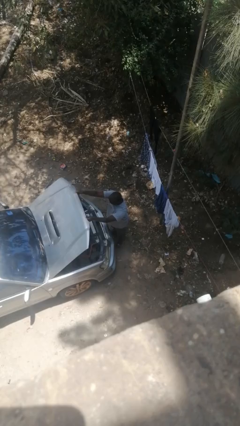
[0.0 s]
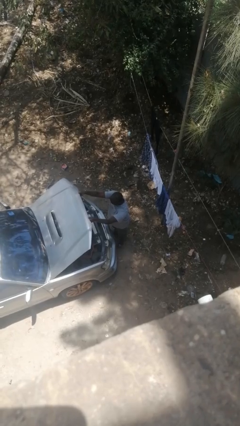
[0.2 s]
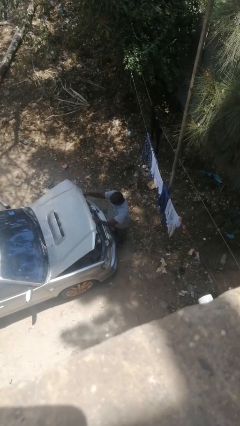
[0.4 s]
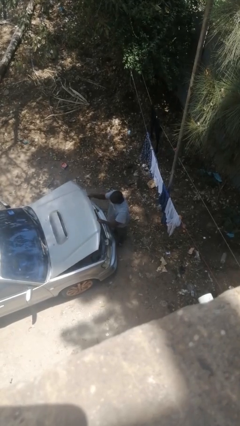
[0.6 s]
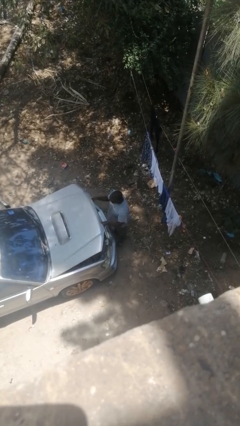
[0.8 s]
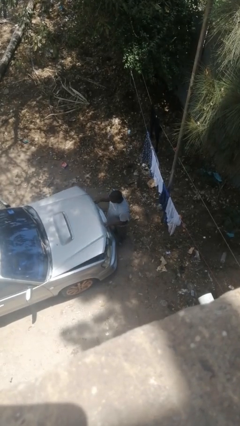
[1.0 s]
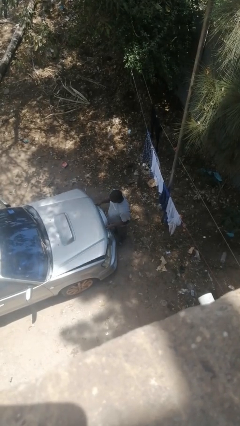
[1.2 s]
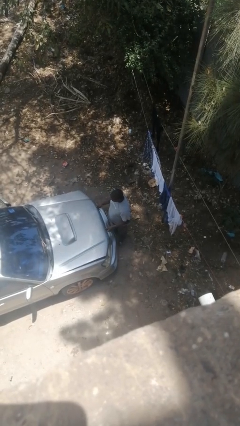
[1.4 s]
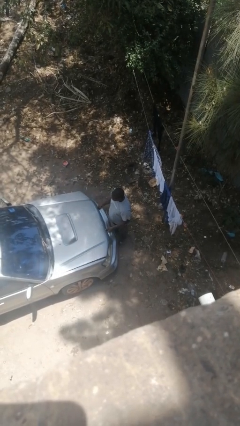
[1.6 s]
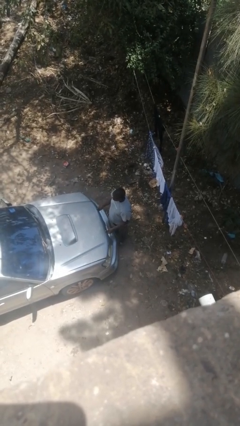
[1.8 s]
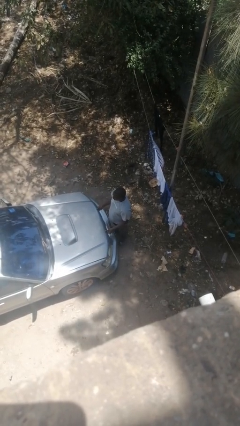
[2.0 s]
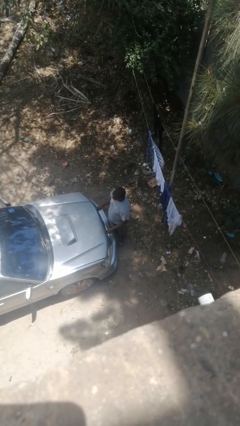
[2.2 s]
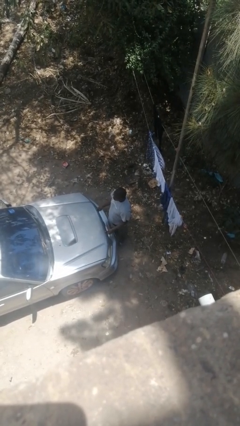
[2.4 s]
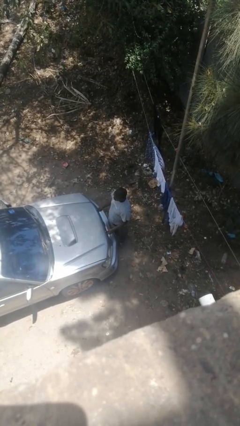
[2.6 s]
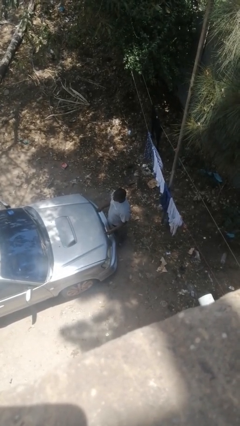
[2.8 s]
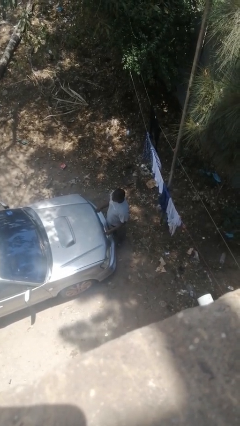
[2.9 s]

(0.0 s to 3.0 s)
person closes car hood

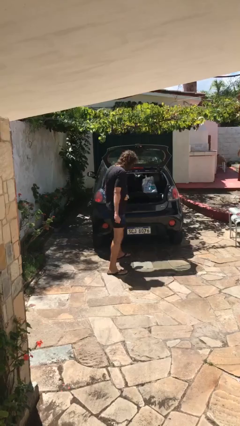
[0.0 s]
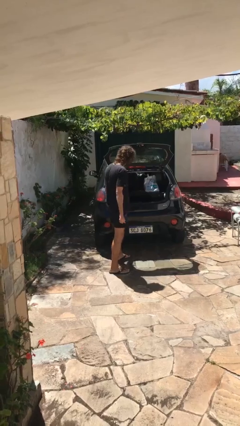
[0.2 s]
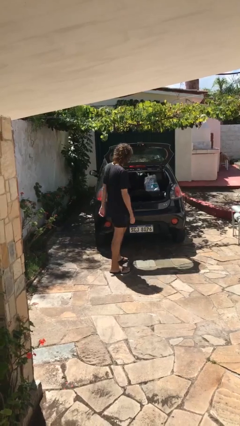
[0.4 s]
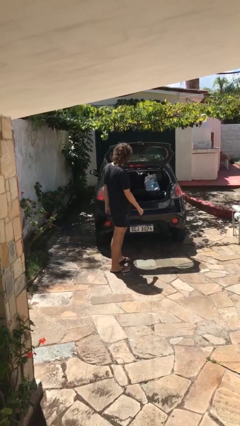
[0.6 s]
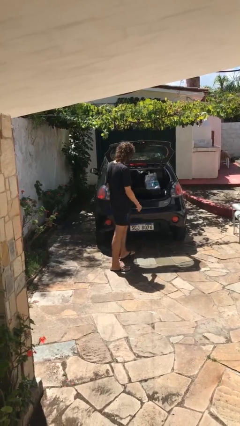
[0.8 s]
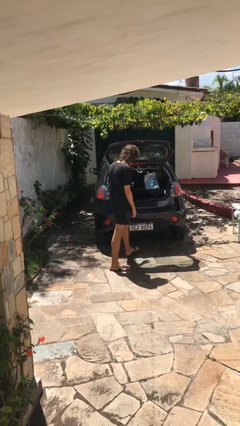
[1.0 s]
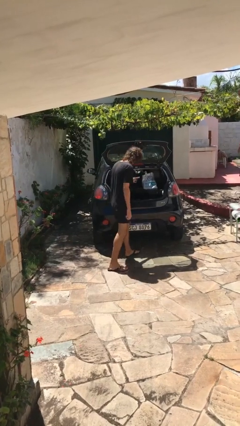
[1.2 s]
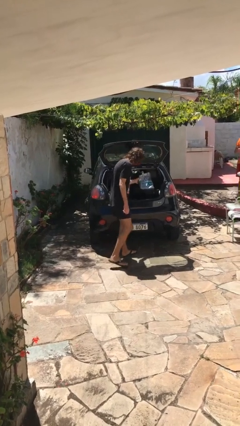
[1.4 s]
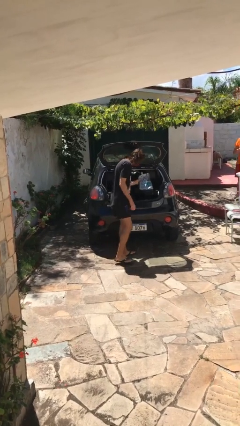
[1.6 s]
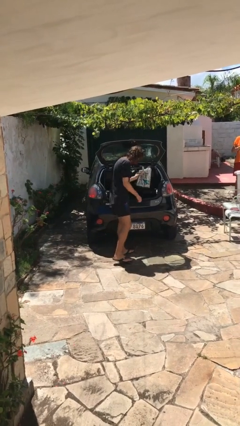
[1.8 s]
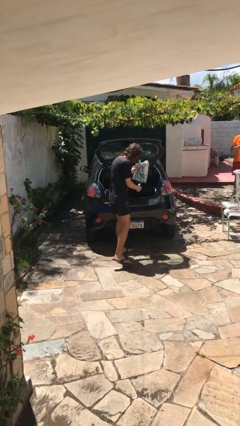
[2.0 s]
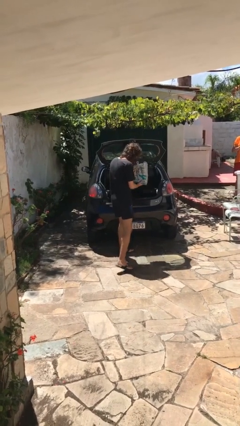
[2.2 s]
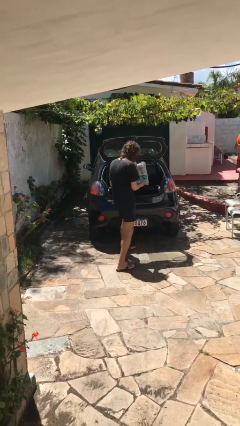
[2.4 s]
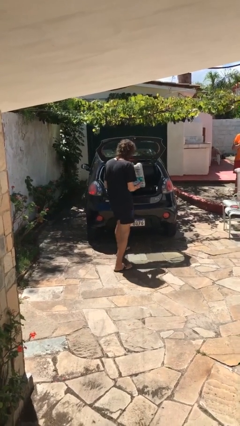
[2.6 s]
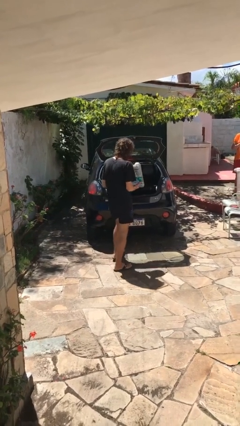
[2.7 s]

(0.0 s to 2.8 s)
person unloads car

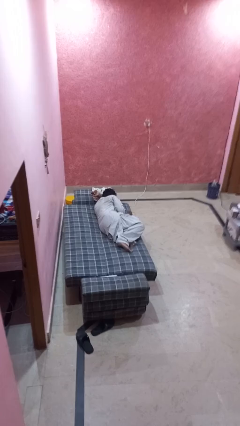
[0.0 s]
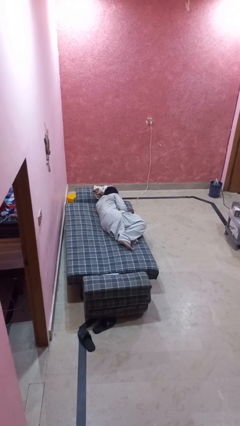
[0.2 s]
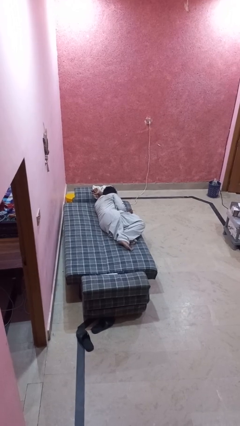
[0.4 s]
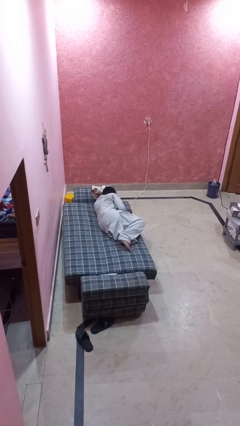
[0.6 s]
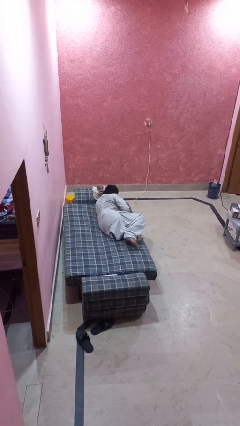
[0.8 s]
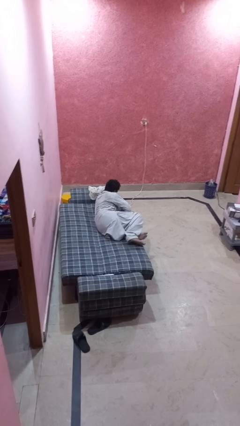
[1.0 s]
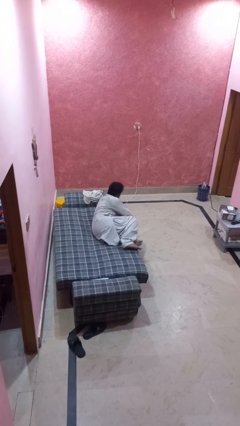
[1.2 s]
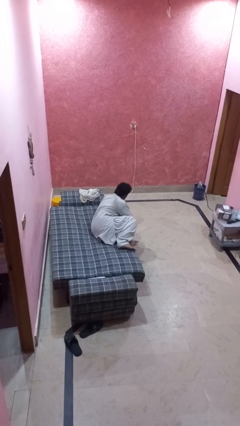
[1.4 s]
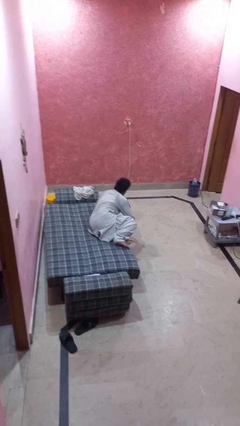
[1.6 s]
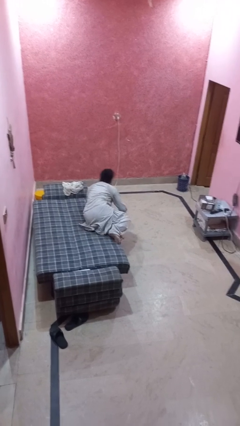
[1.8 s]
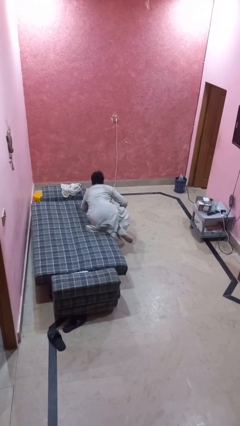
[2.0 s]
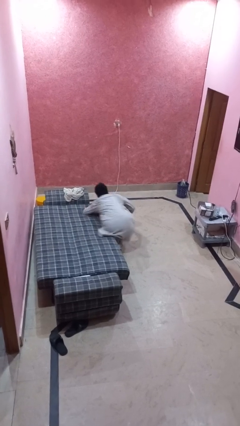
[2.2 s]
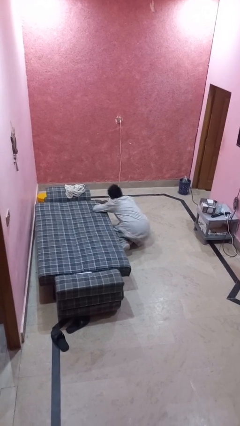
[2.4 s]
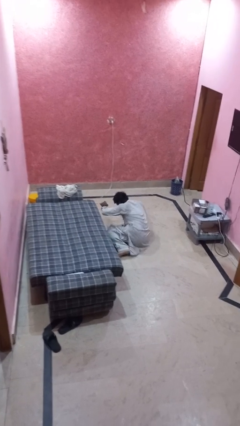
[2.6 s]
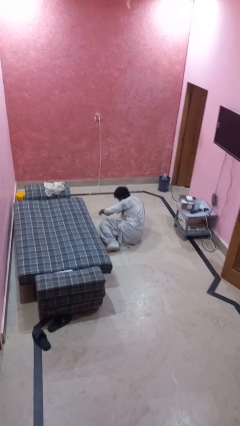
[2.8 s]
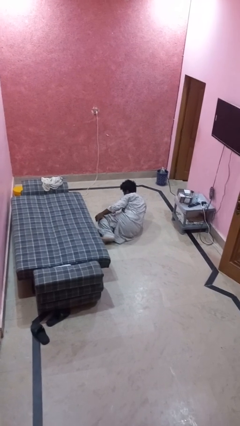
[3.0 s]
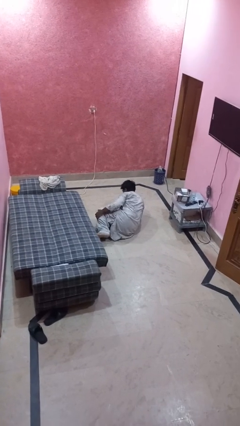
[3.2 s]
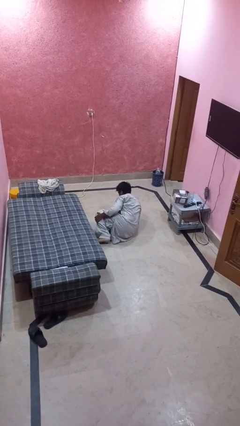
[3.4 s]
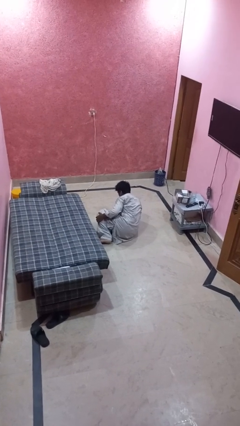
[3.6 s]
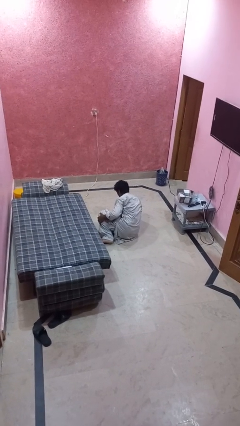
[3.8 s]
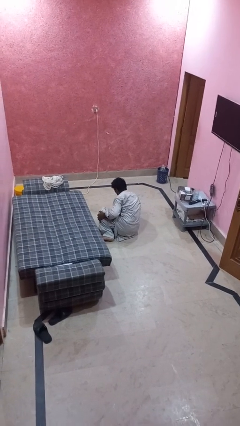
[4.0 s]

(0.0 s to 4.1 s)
person falls from bed

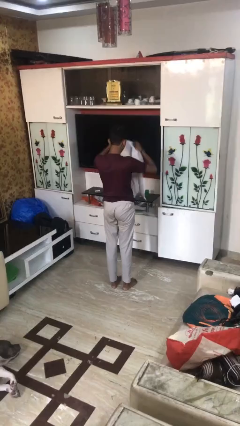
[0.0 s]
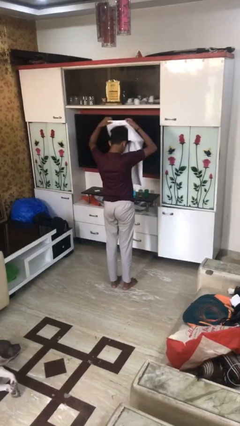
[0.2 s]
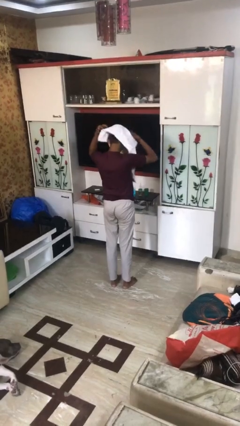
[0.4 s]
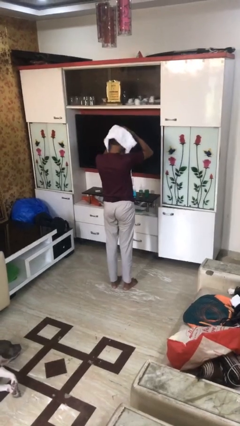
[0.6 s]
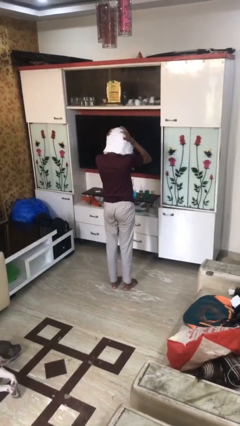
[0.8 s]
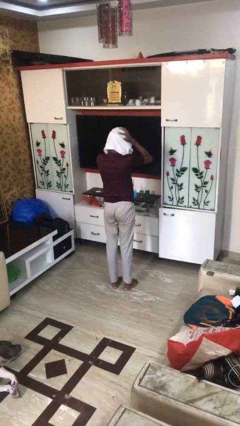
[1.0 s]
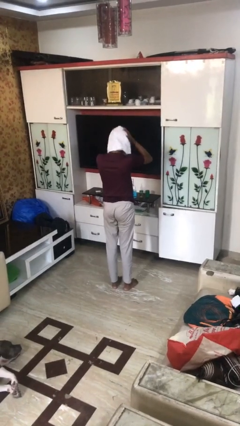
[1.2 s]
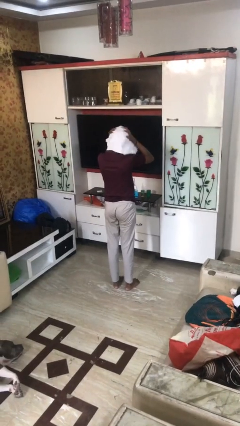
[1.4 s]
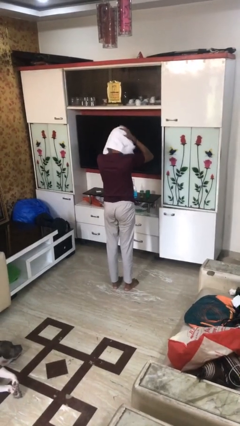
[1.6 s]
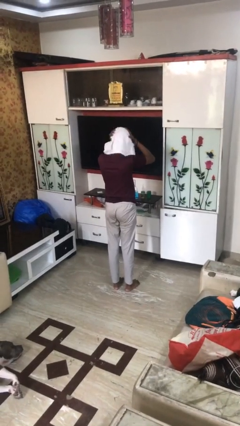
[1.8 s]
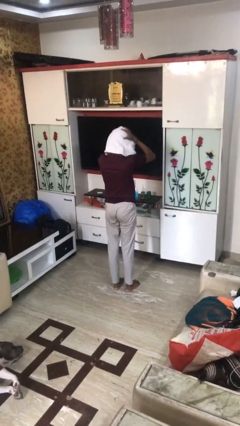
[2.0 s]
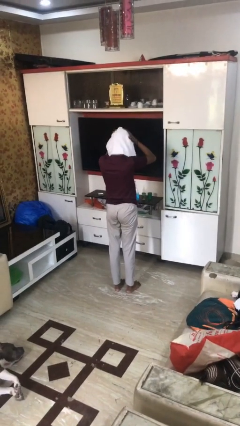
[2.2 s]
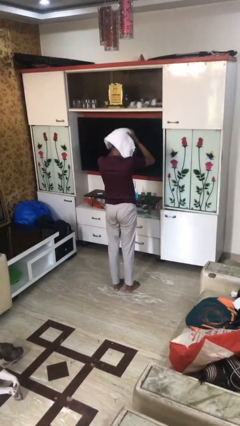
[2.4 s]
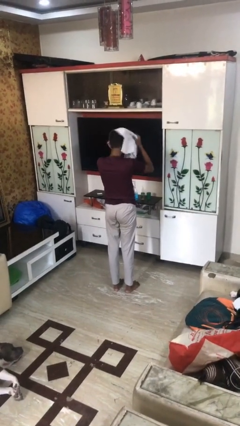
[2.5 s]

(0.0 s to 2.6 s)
person dries hair with towel

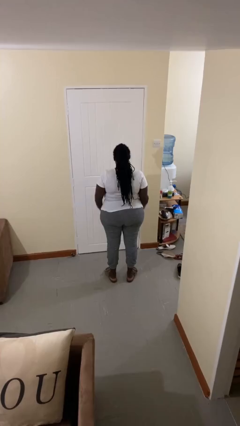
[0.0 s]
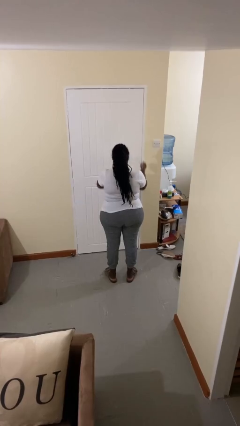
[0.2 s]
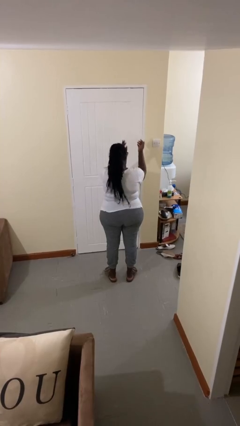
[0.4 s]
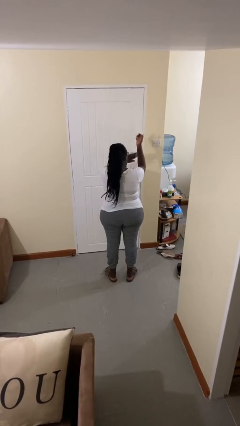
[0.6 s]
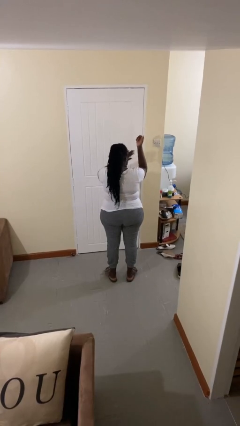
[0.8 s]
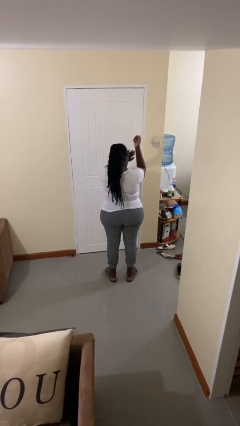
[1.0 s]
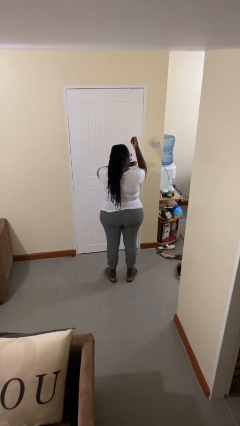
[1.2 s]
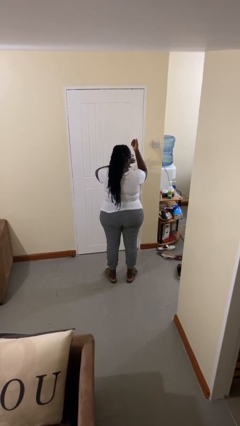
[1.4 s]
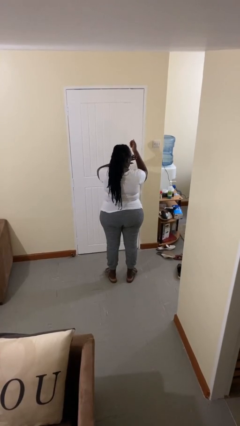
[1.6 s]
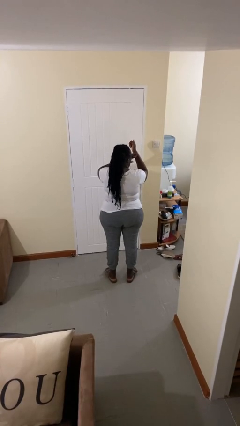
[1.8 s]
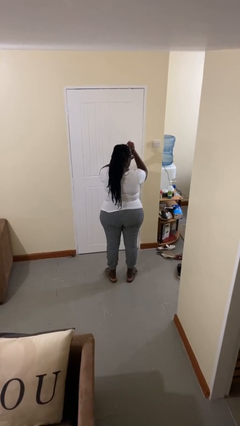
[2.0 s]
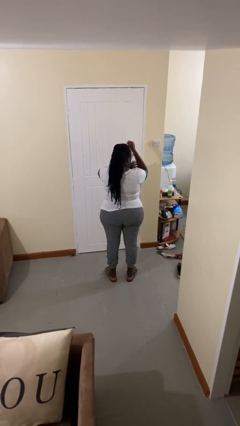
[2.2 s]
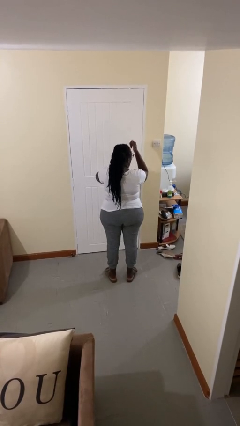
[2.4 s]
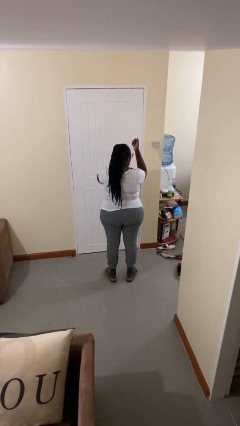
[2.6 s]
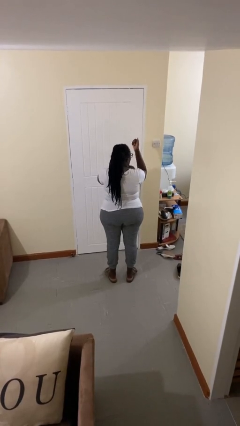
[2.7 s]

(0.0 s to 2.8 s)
person swats bug

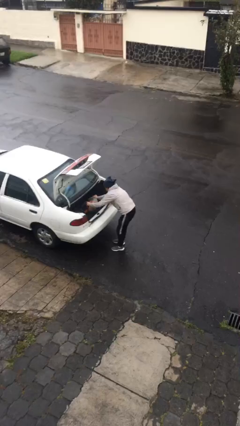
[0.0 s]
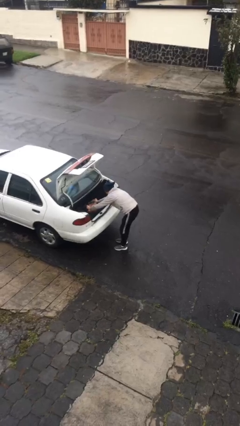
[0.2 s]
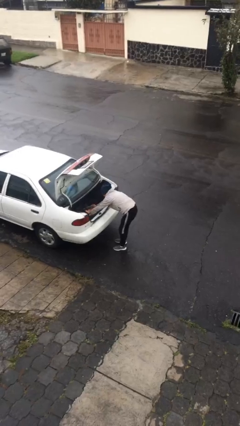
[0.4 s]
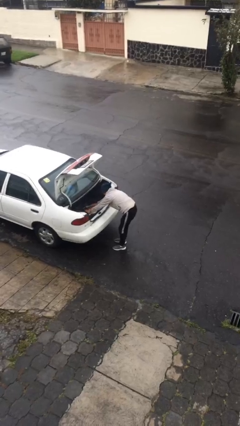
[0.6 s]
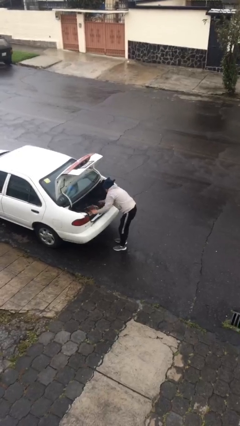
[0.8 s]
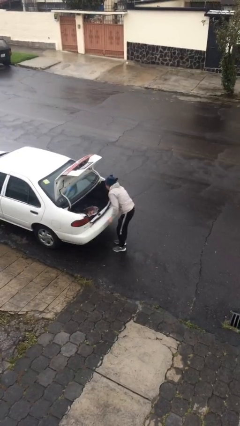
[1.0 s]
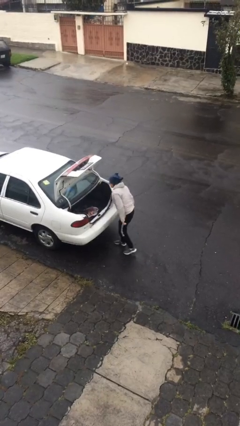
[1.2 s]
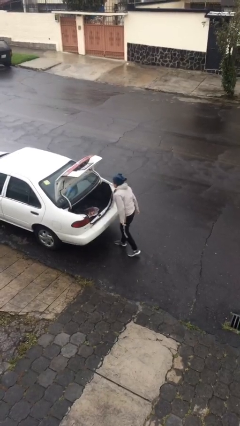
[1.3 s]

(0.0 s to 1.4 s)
person loads car

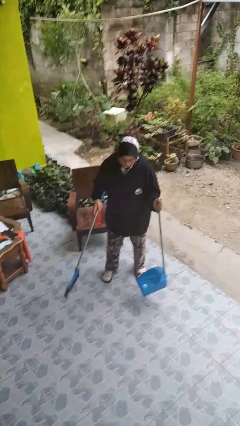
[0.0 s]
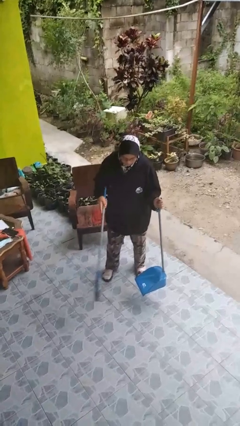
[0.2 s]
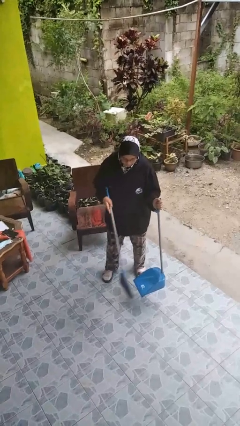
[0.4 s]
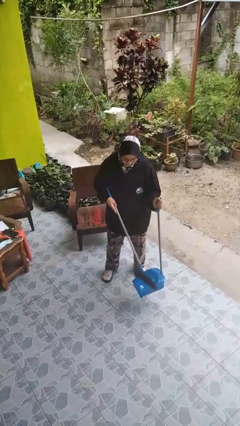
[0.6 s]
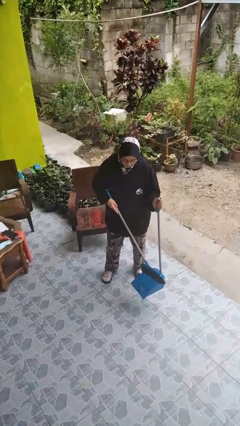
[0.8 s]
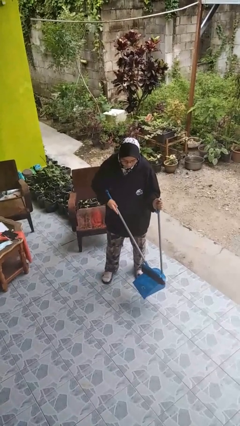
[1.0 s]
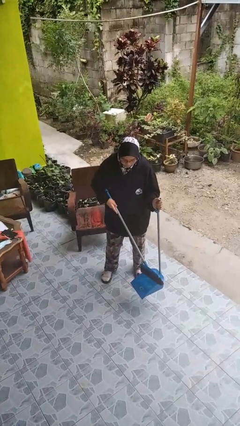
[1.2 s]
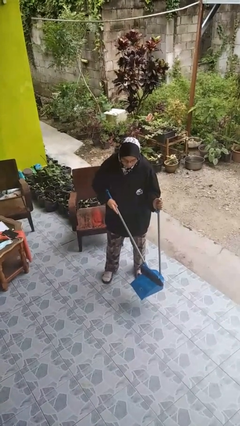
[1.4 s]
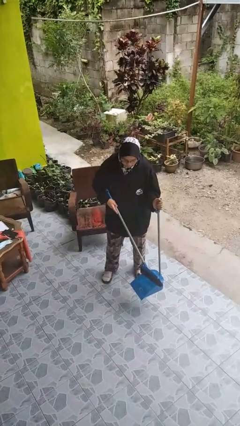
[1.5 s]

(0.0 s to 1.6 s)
person sweeps floor
